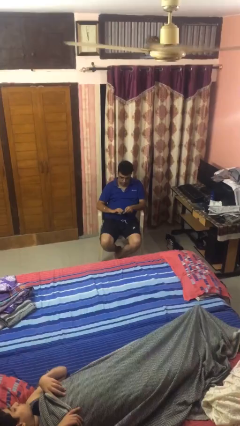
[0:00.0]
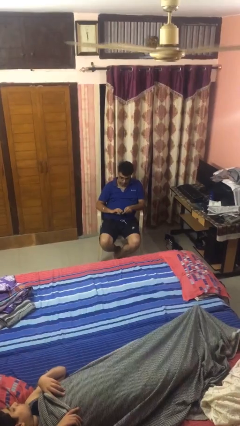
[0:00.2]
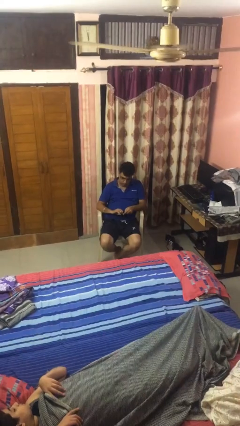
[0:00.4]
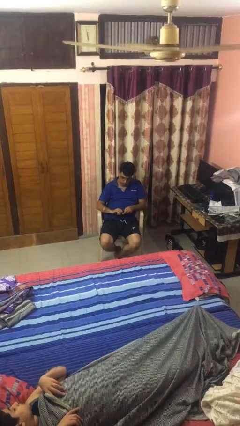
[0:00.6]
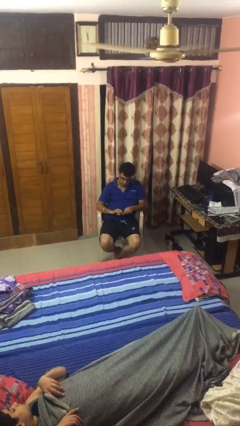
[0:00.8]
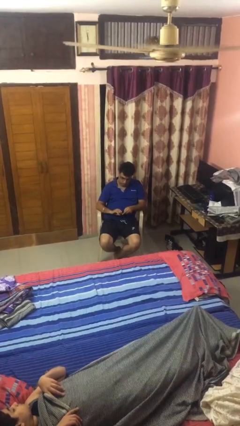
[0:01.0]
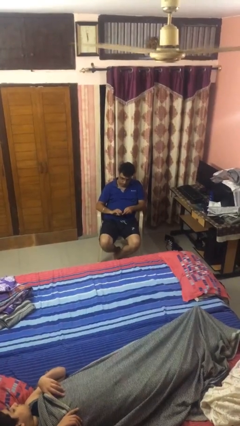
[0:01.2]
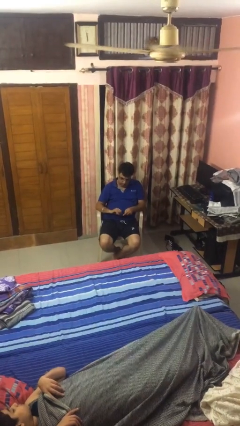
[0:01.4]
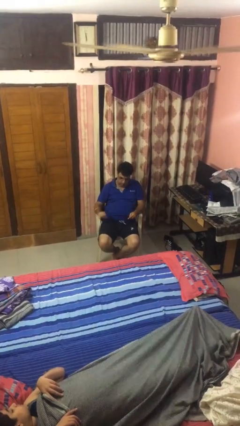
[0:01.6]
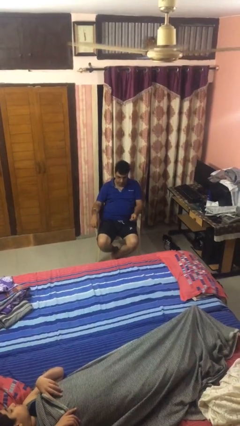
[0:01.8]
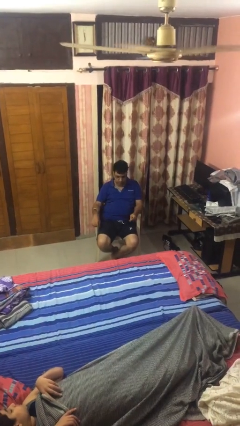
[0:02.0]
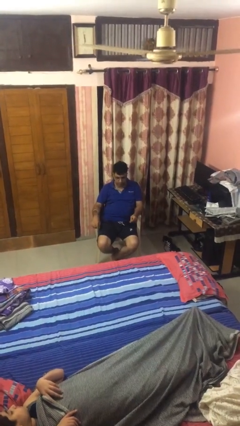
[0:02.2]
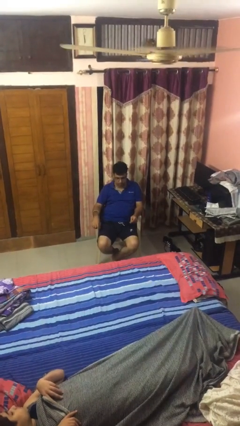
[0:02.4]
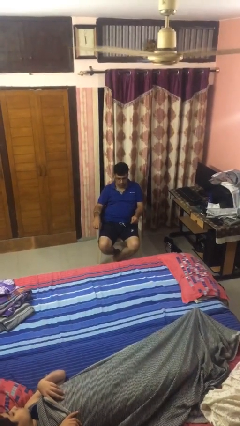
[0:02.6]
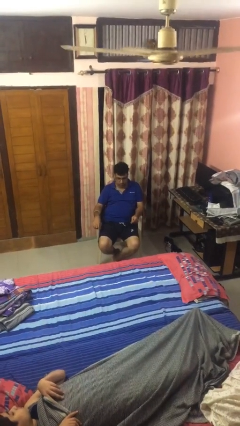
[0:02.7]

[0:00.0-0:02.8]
person files fingernails

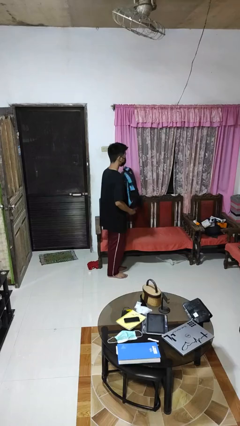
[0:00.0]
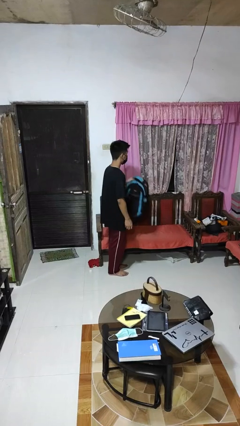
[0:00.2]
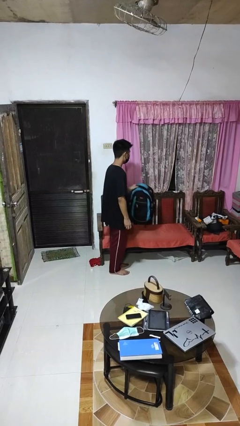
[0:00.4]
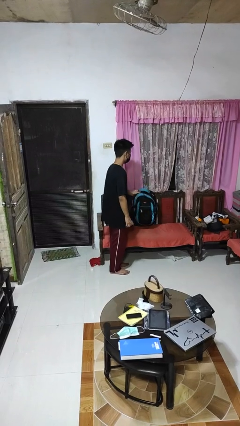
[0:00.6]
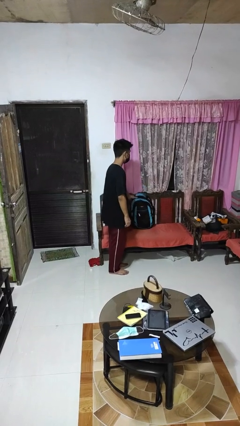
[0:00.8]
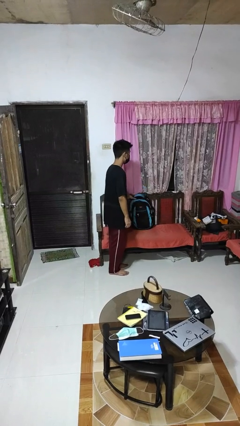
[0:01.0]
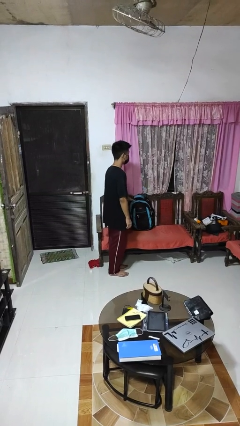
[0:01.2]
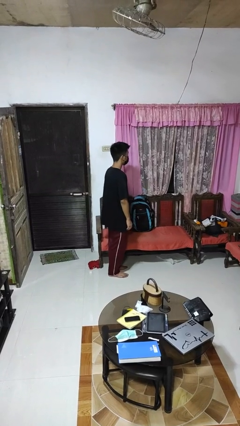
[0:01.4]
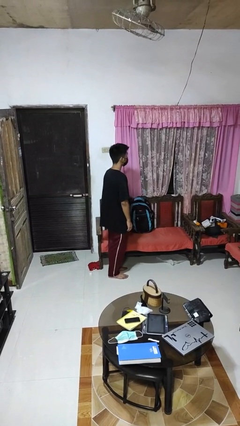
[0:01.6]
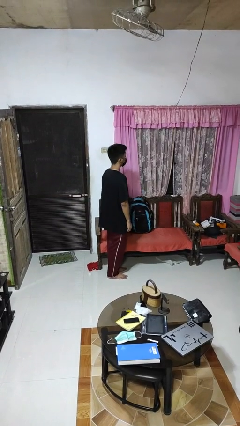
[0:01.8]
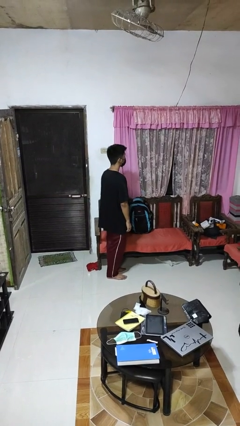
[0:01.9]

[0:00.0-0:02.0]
person puts down object on couch

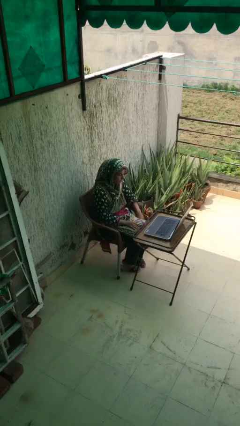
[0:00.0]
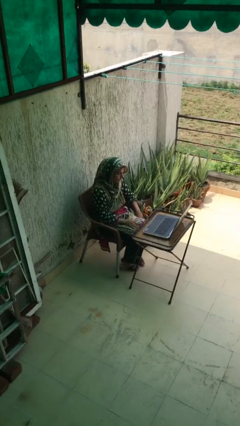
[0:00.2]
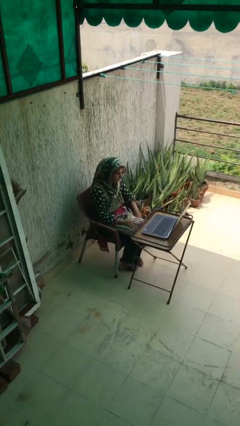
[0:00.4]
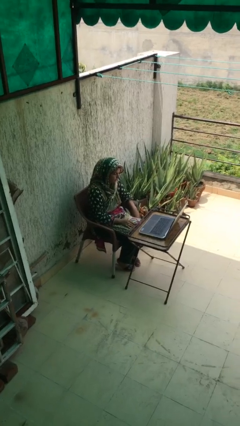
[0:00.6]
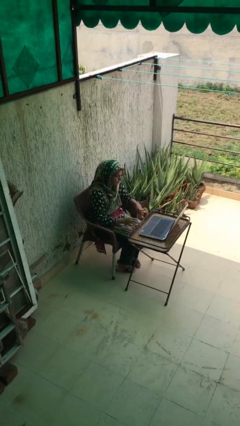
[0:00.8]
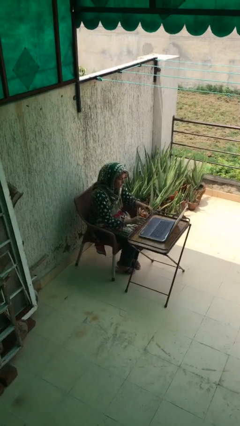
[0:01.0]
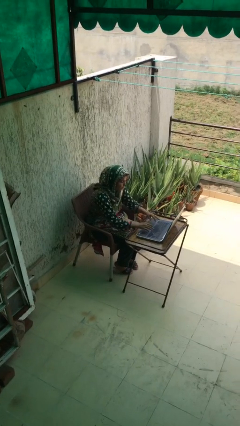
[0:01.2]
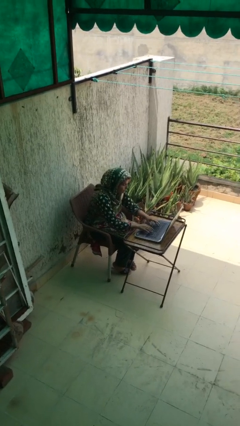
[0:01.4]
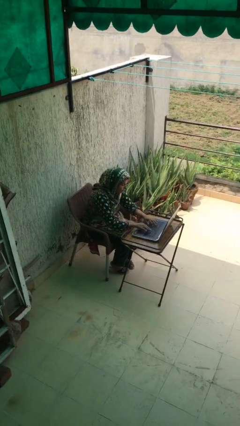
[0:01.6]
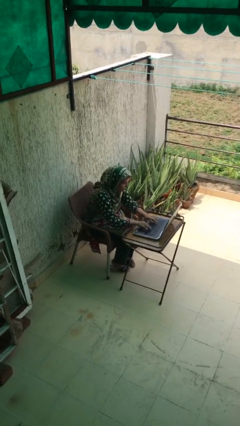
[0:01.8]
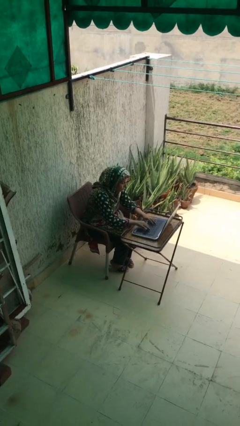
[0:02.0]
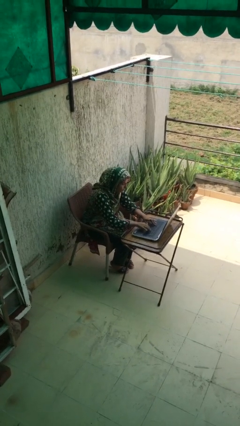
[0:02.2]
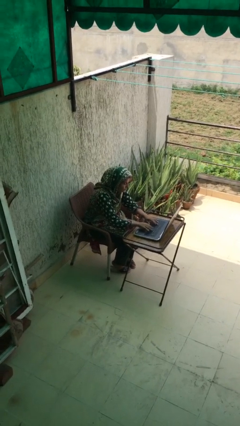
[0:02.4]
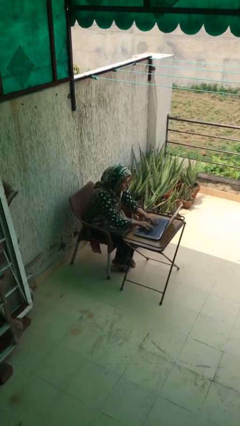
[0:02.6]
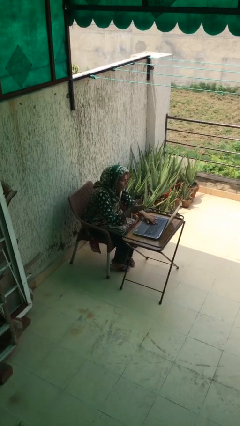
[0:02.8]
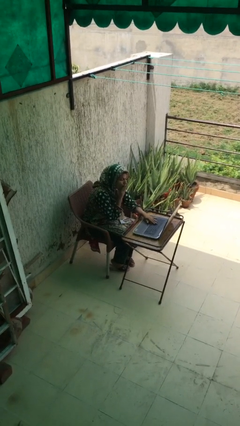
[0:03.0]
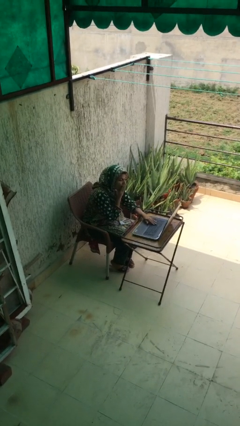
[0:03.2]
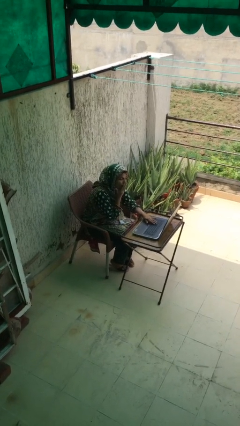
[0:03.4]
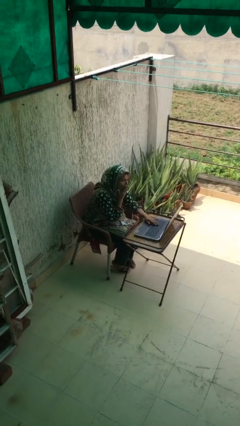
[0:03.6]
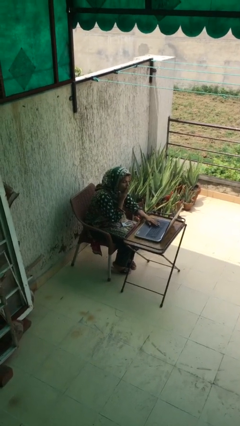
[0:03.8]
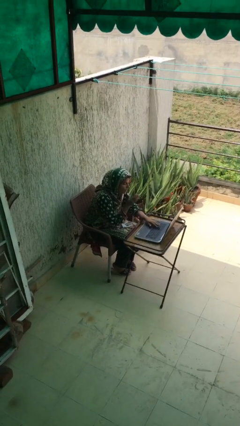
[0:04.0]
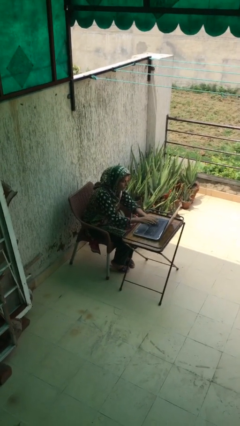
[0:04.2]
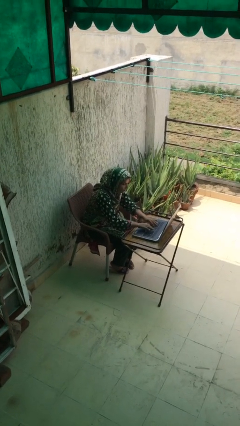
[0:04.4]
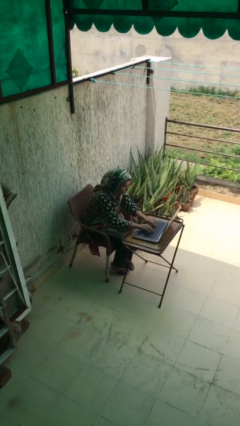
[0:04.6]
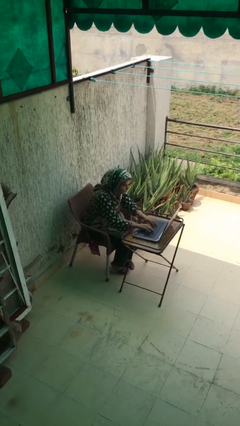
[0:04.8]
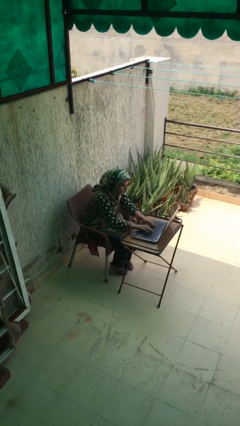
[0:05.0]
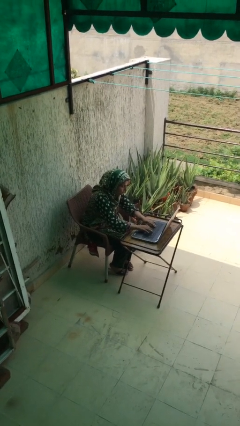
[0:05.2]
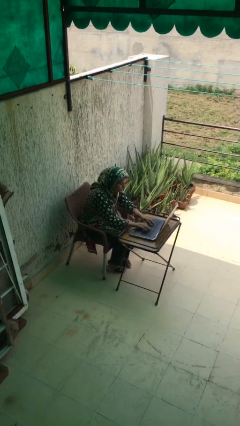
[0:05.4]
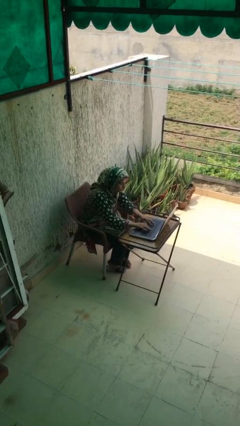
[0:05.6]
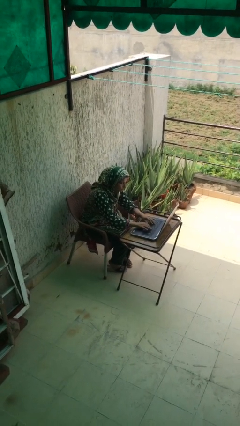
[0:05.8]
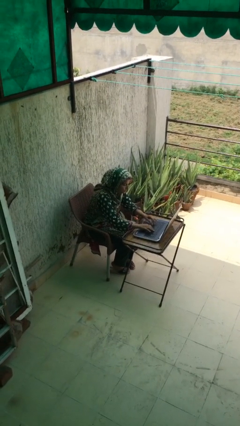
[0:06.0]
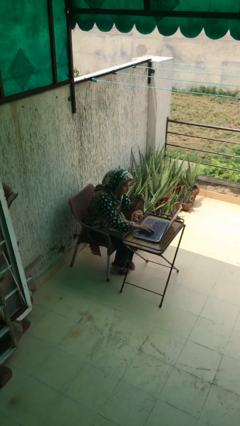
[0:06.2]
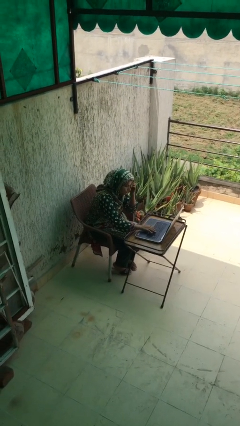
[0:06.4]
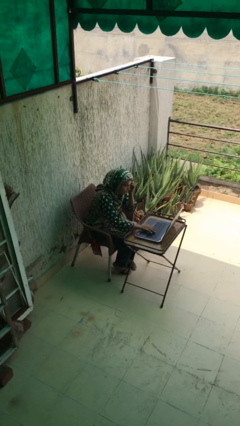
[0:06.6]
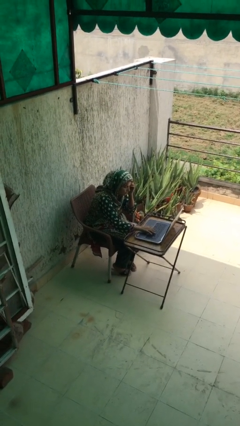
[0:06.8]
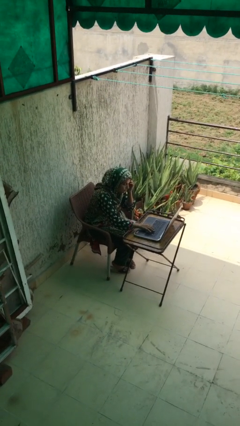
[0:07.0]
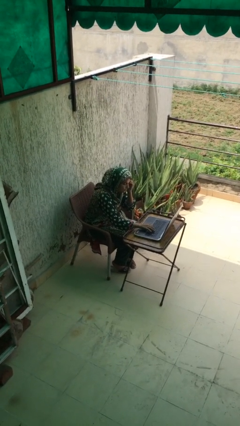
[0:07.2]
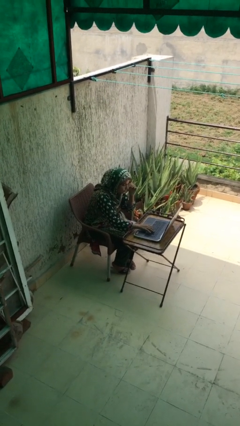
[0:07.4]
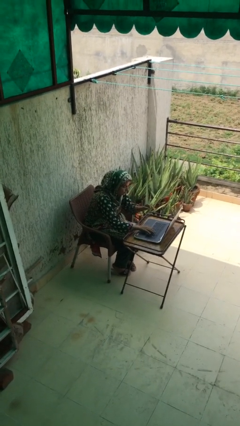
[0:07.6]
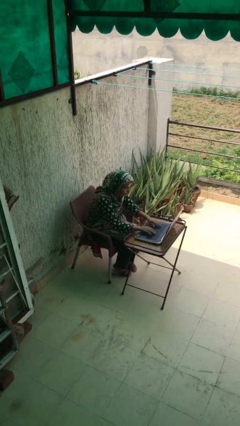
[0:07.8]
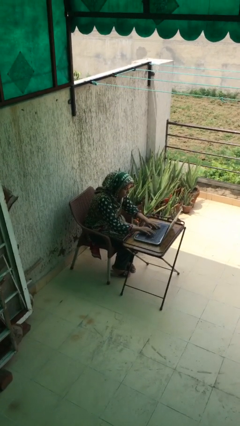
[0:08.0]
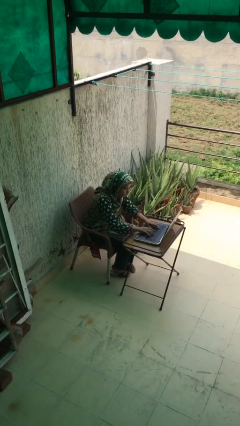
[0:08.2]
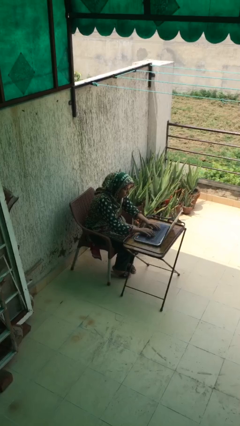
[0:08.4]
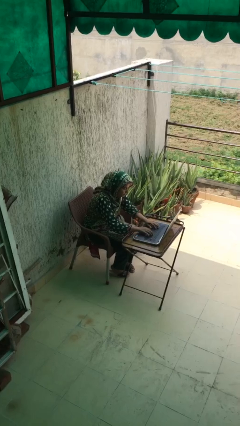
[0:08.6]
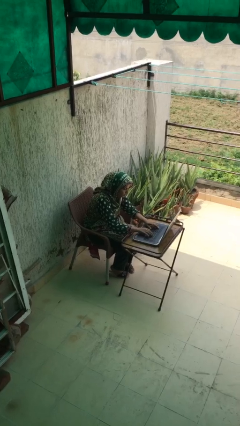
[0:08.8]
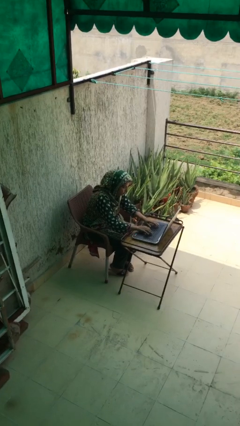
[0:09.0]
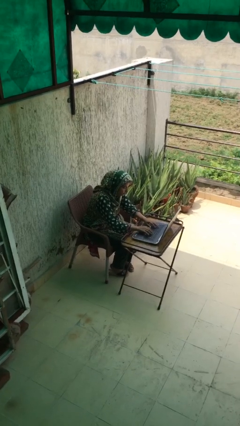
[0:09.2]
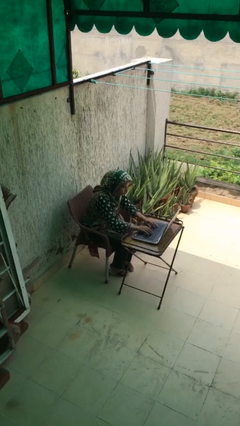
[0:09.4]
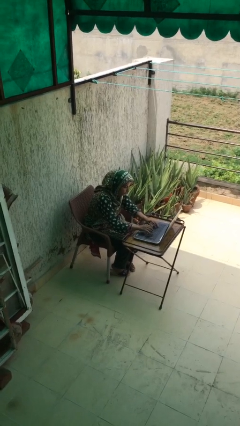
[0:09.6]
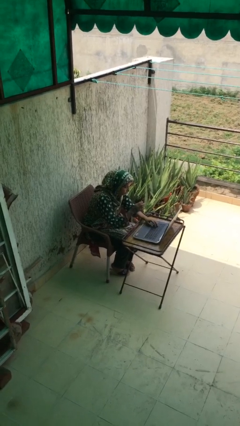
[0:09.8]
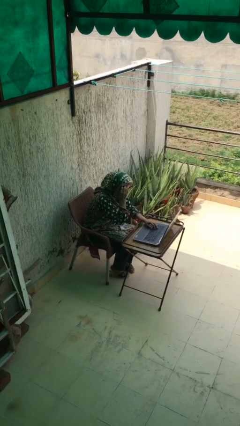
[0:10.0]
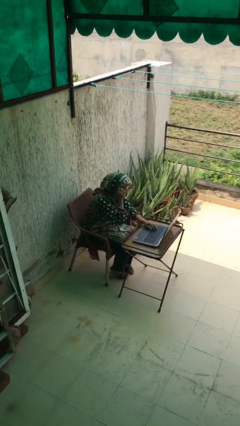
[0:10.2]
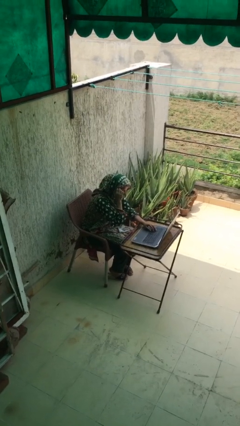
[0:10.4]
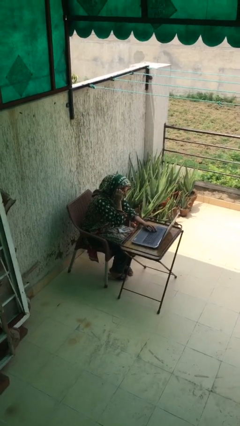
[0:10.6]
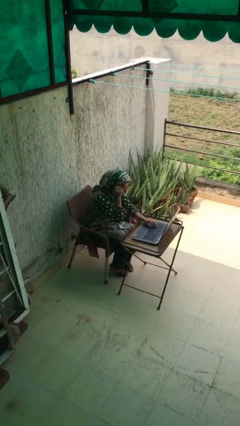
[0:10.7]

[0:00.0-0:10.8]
person interacts with laptop

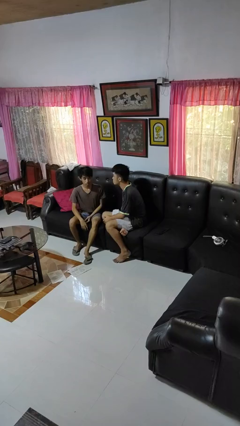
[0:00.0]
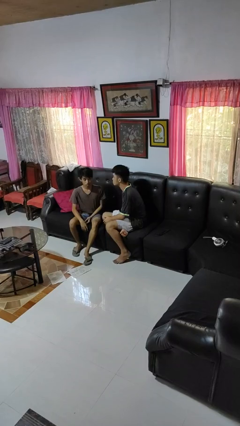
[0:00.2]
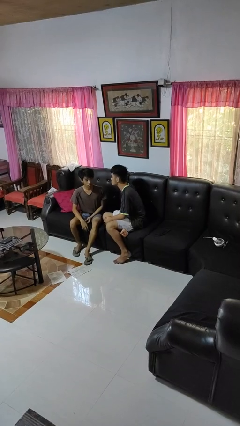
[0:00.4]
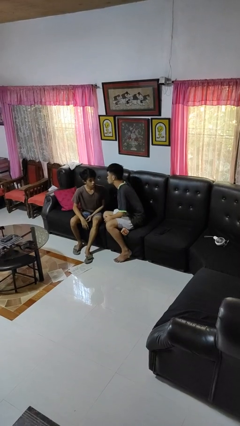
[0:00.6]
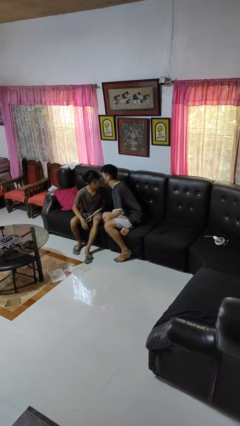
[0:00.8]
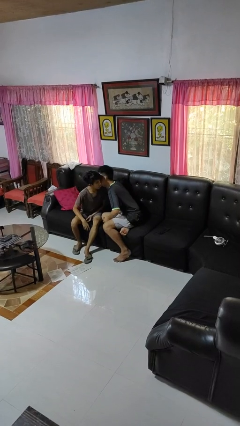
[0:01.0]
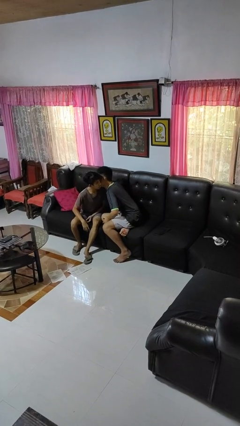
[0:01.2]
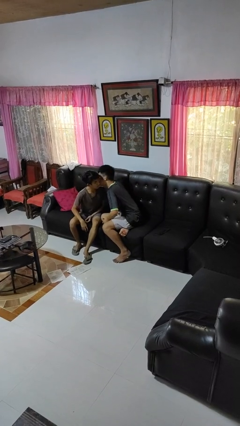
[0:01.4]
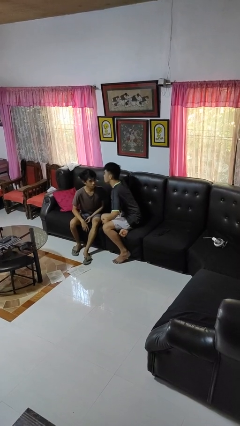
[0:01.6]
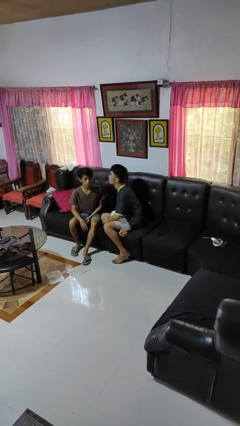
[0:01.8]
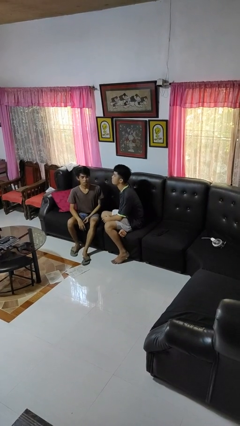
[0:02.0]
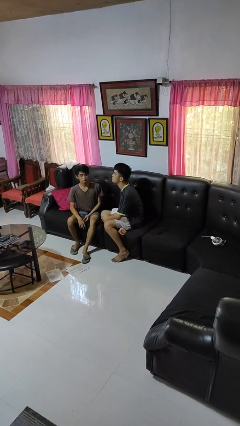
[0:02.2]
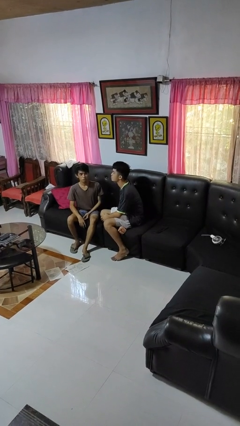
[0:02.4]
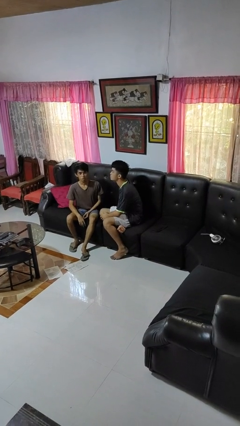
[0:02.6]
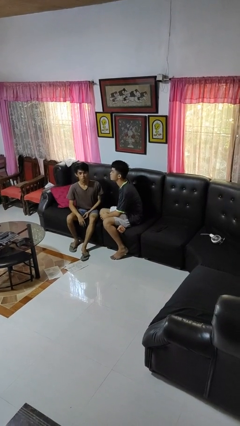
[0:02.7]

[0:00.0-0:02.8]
person kisses cheek of person
